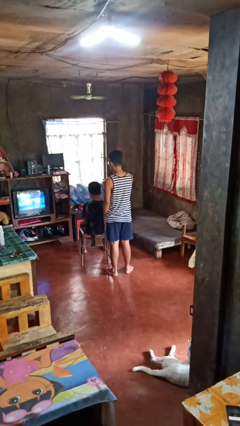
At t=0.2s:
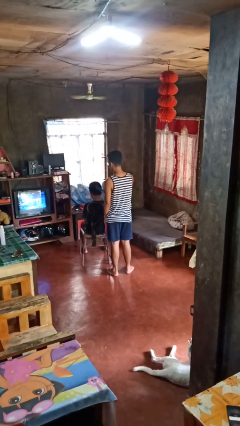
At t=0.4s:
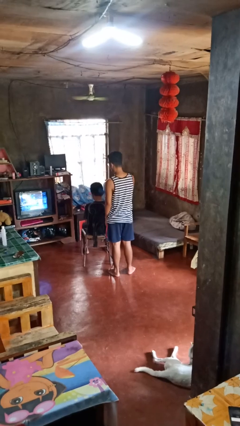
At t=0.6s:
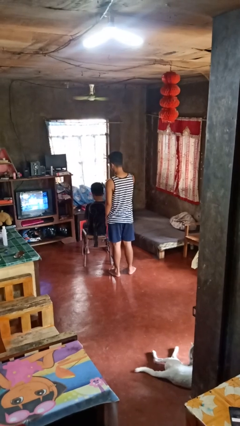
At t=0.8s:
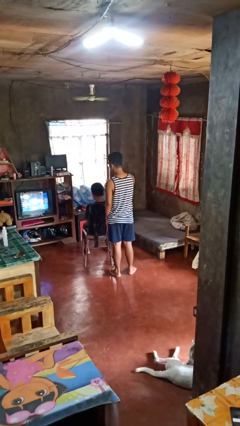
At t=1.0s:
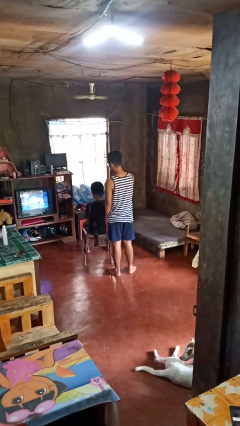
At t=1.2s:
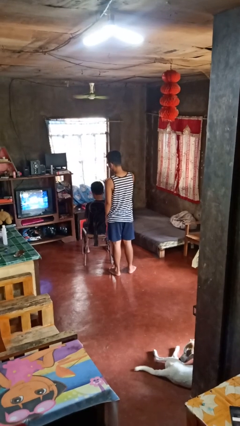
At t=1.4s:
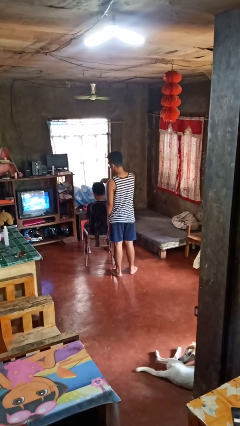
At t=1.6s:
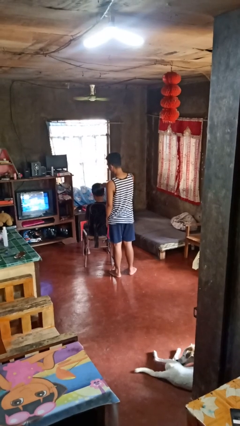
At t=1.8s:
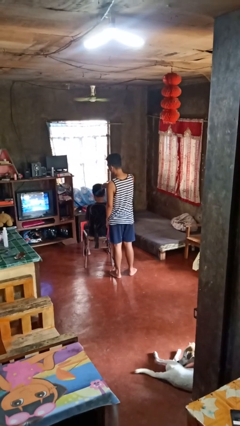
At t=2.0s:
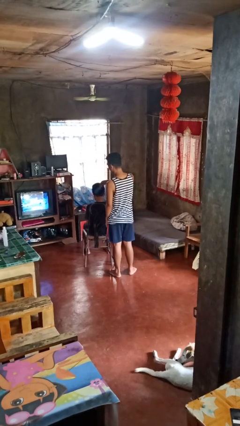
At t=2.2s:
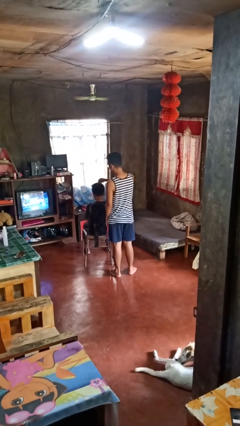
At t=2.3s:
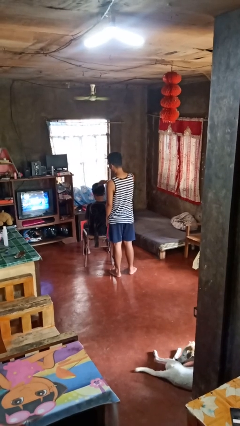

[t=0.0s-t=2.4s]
person brushes hair of person

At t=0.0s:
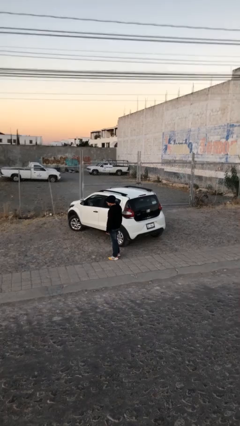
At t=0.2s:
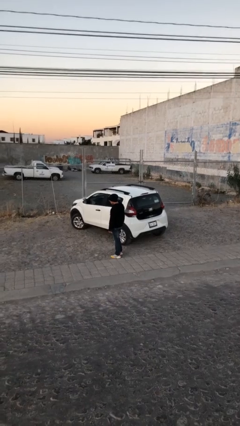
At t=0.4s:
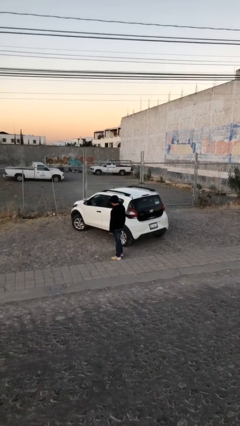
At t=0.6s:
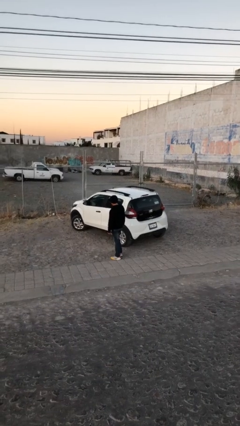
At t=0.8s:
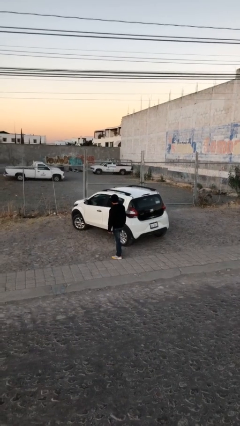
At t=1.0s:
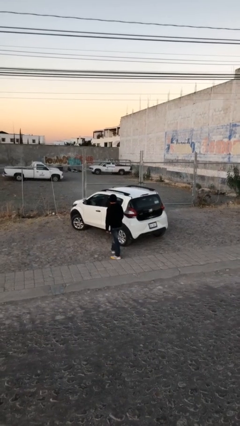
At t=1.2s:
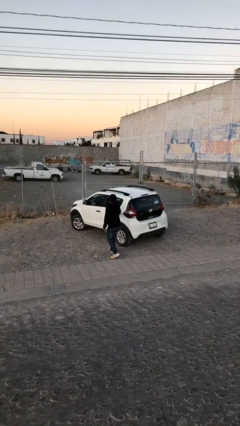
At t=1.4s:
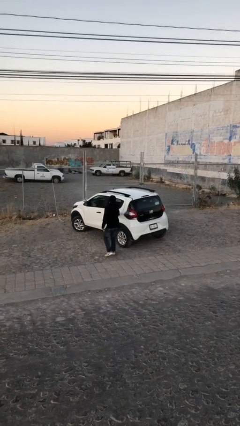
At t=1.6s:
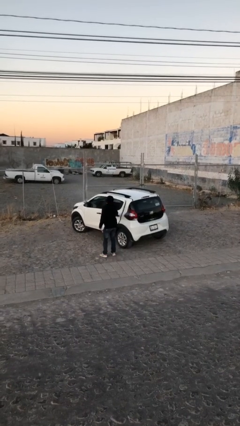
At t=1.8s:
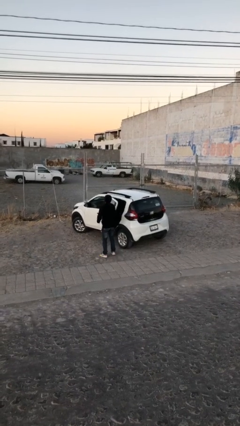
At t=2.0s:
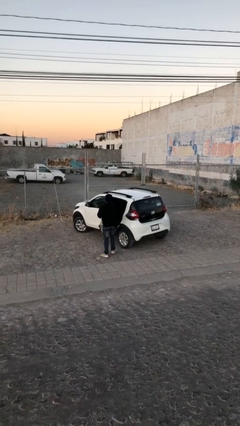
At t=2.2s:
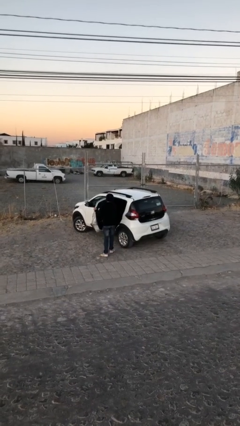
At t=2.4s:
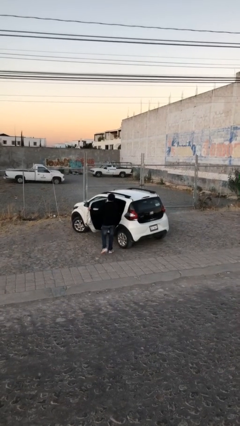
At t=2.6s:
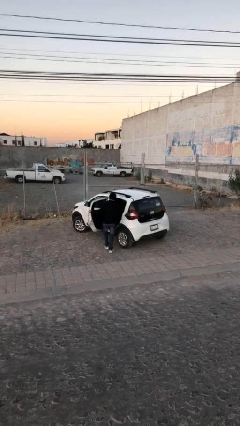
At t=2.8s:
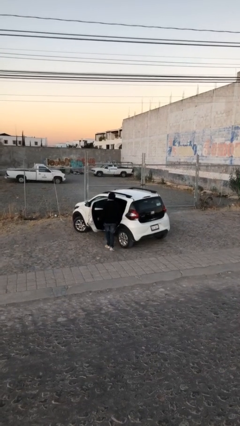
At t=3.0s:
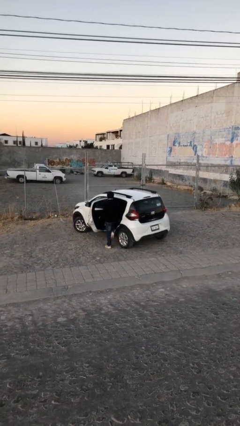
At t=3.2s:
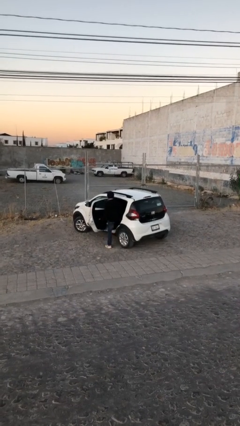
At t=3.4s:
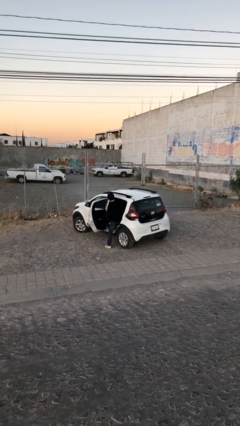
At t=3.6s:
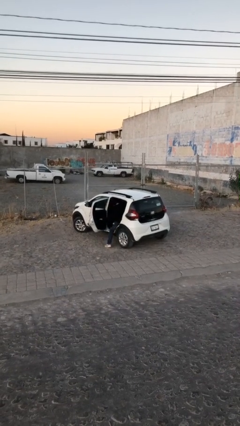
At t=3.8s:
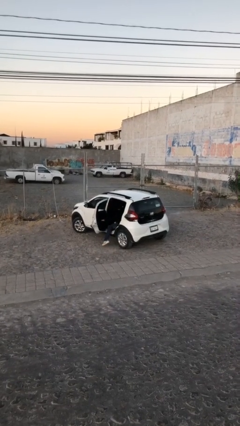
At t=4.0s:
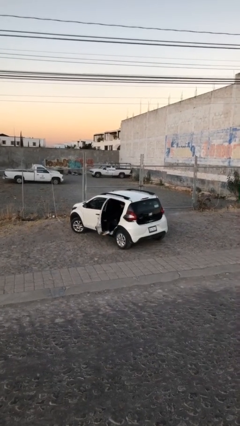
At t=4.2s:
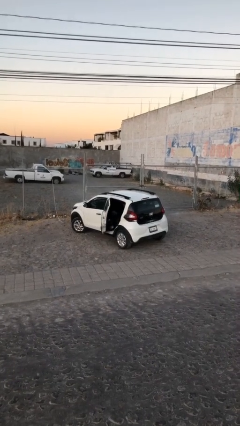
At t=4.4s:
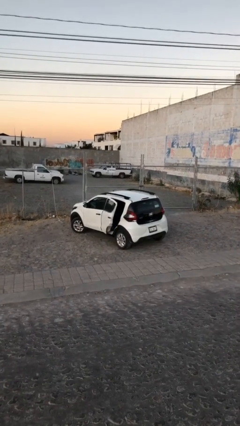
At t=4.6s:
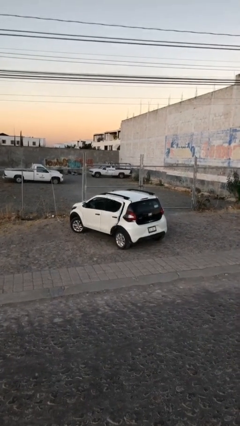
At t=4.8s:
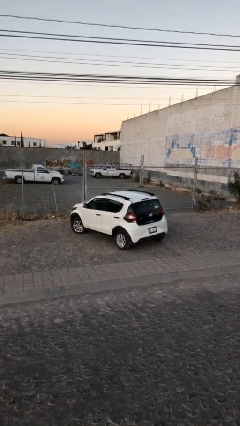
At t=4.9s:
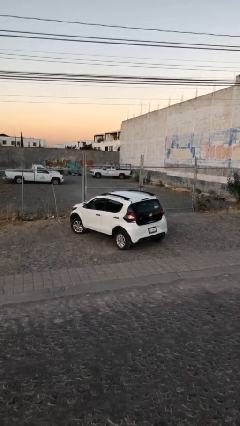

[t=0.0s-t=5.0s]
car picks up person

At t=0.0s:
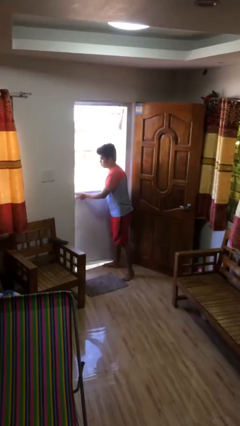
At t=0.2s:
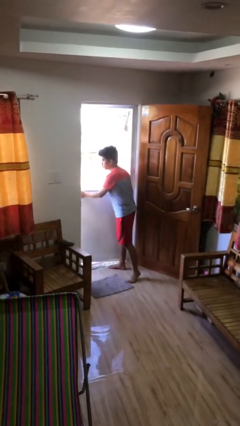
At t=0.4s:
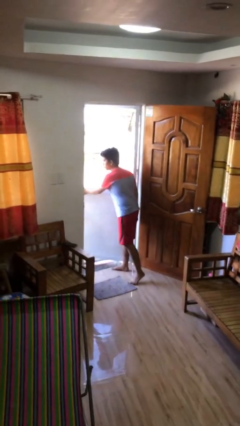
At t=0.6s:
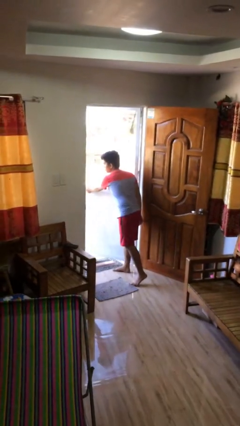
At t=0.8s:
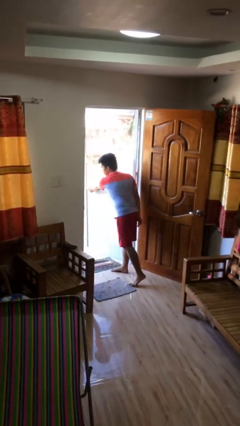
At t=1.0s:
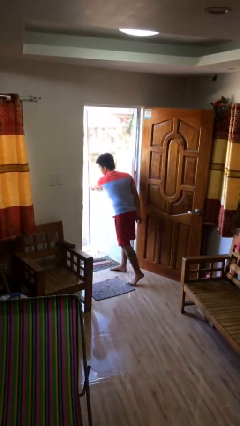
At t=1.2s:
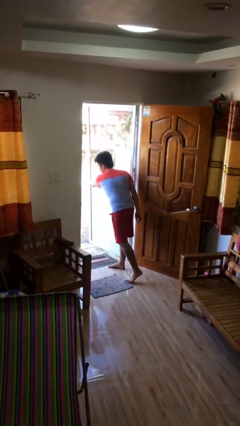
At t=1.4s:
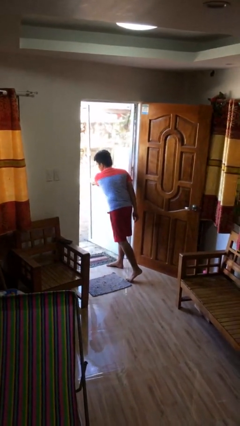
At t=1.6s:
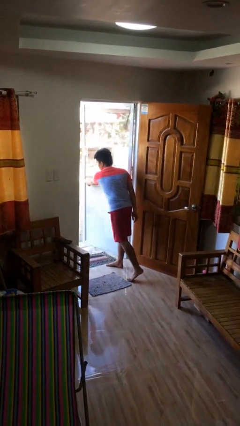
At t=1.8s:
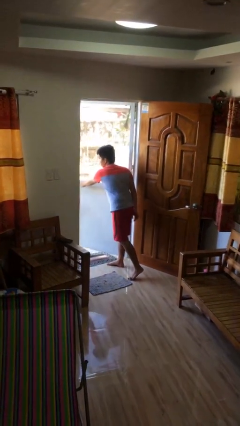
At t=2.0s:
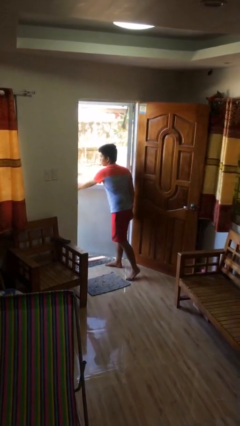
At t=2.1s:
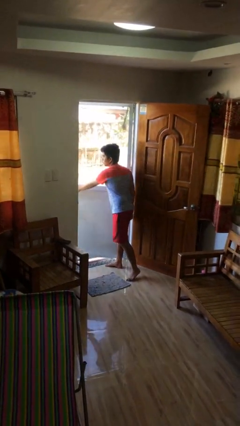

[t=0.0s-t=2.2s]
person opens facility door

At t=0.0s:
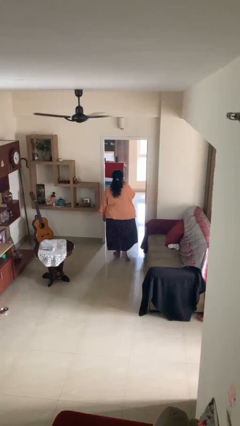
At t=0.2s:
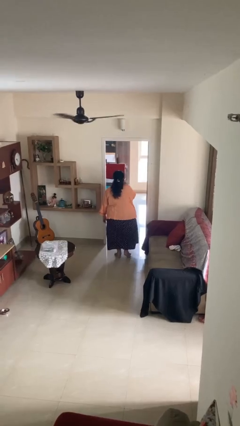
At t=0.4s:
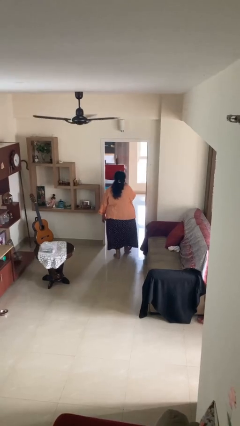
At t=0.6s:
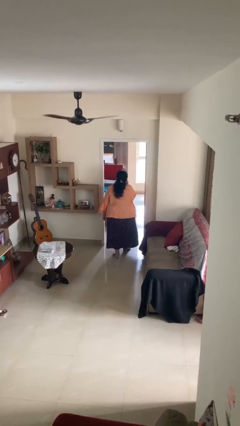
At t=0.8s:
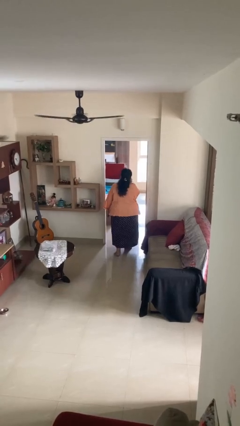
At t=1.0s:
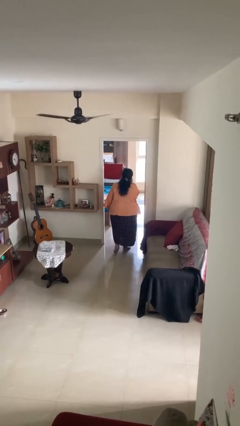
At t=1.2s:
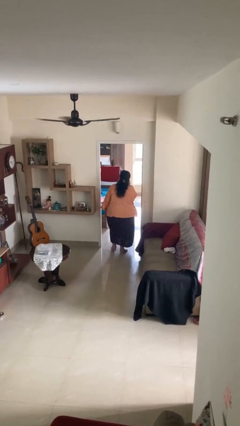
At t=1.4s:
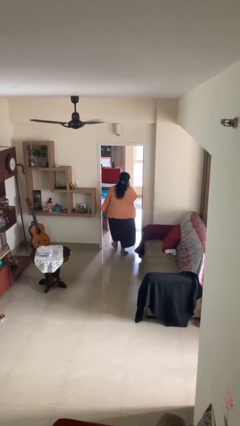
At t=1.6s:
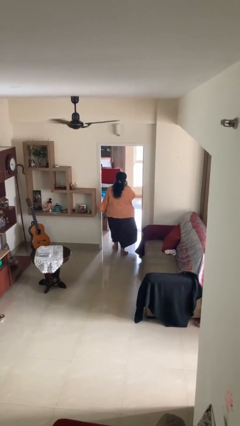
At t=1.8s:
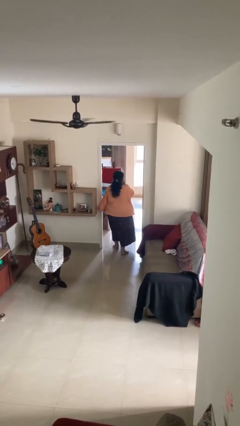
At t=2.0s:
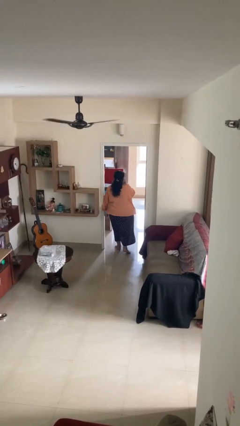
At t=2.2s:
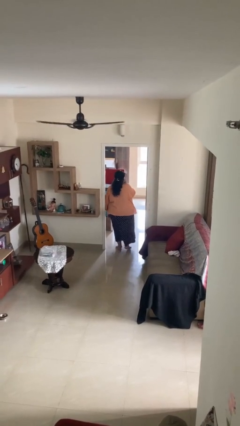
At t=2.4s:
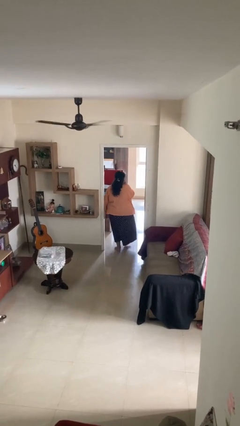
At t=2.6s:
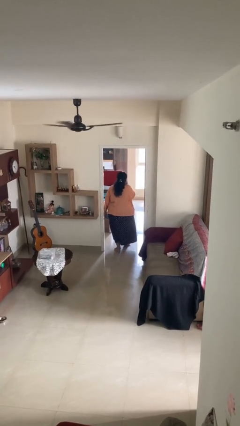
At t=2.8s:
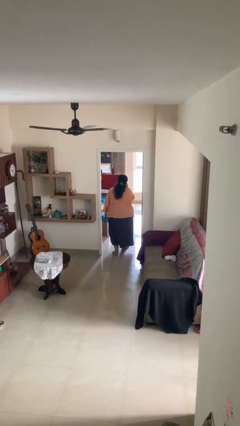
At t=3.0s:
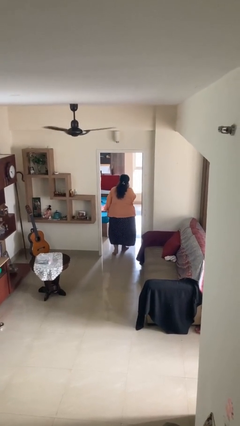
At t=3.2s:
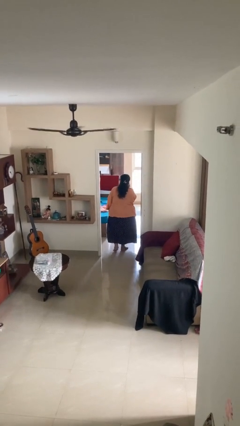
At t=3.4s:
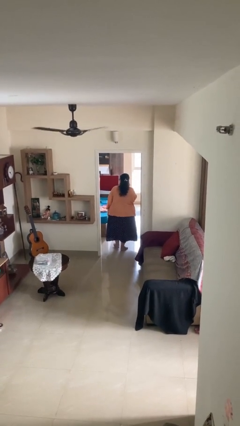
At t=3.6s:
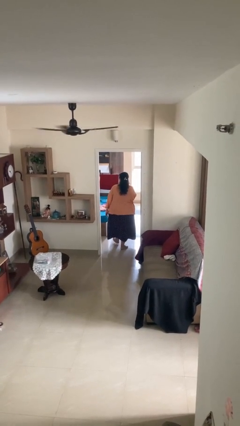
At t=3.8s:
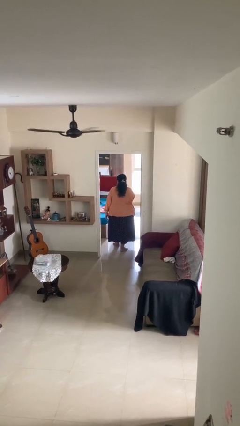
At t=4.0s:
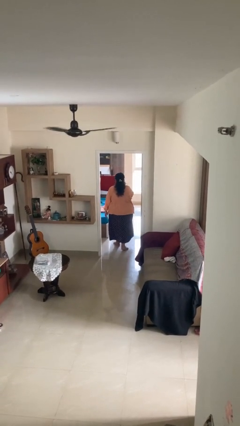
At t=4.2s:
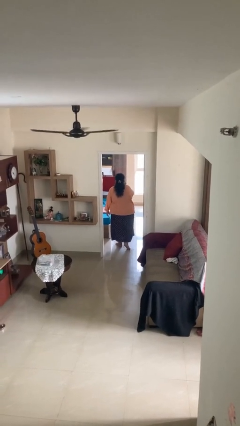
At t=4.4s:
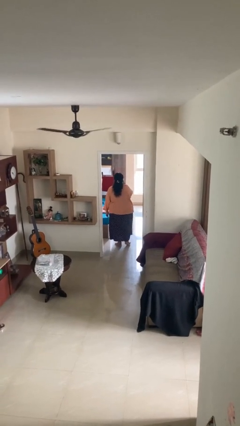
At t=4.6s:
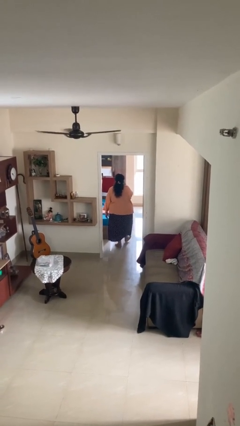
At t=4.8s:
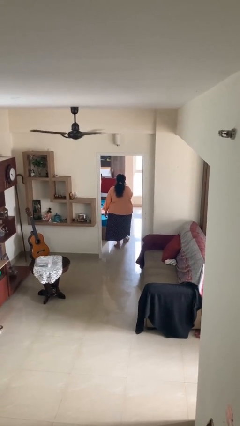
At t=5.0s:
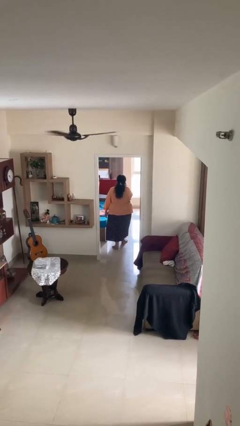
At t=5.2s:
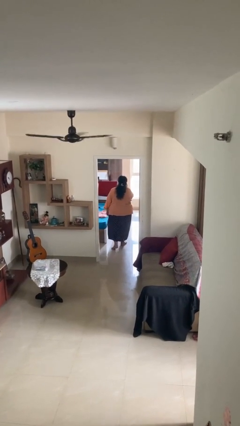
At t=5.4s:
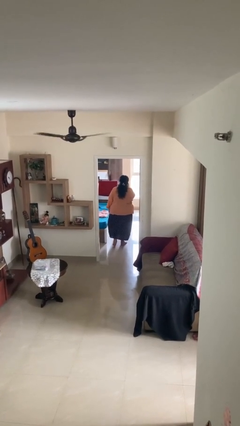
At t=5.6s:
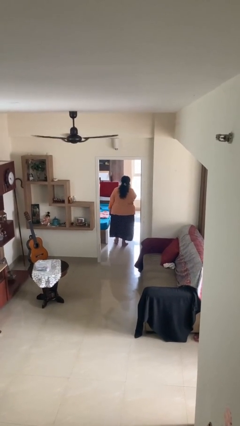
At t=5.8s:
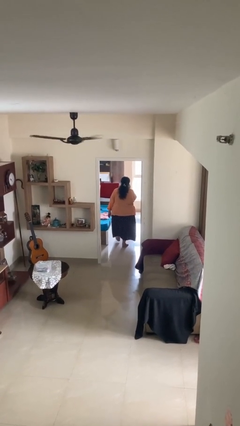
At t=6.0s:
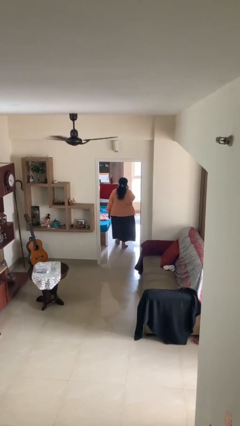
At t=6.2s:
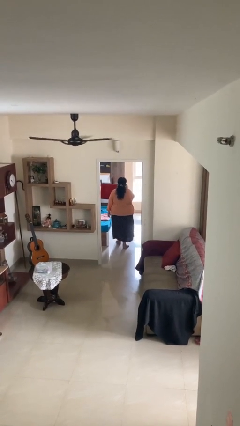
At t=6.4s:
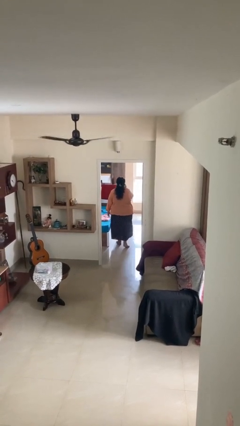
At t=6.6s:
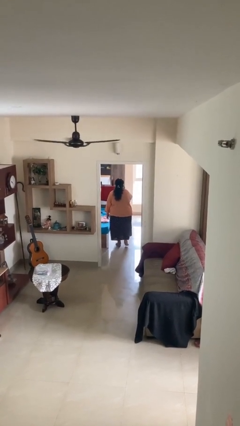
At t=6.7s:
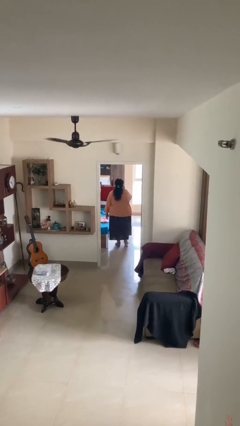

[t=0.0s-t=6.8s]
person exits scene through structure

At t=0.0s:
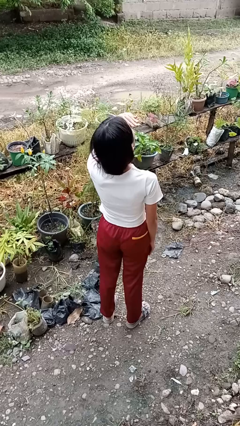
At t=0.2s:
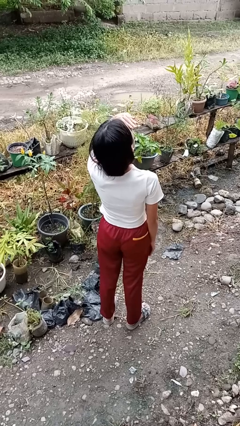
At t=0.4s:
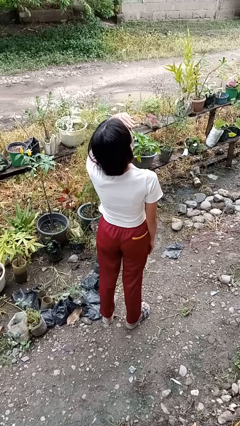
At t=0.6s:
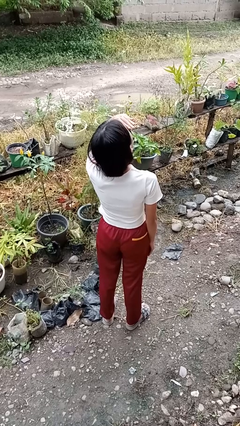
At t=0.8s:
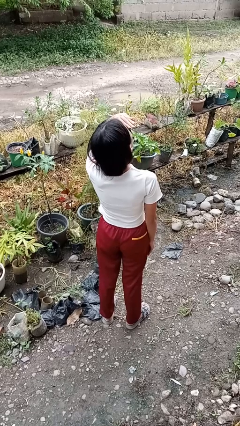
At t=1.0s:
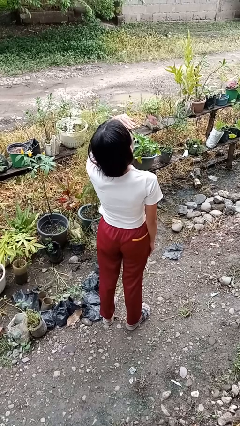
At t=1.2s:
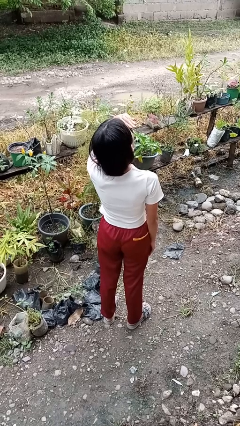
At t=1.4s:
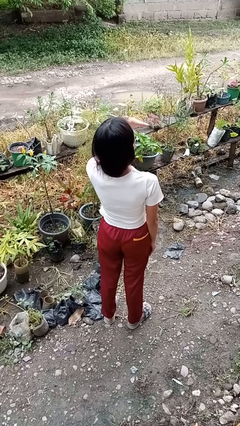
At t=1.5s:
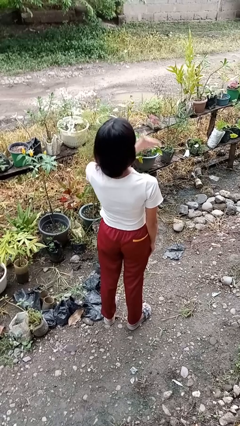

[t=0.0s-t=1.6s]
person shades eyes
